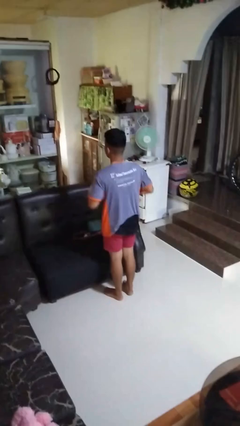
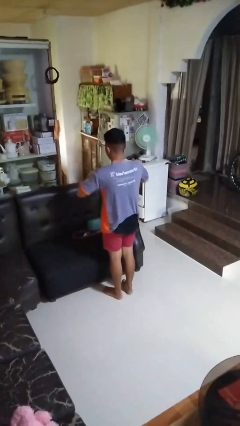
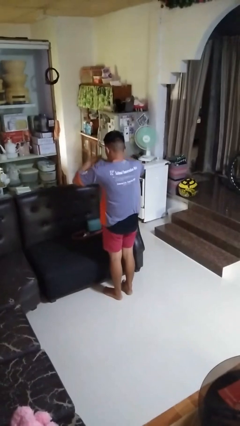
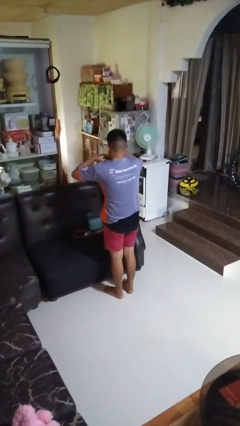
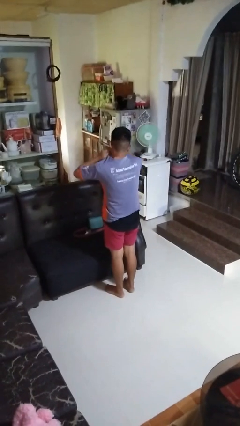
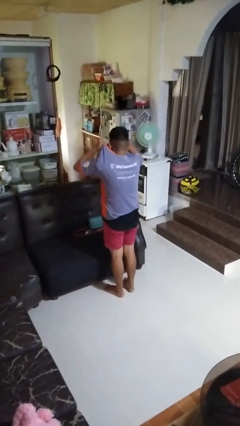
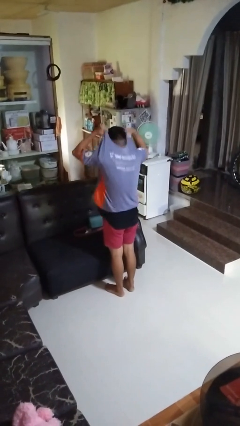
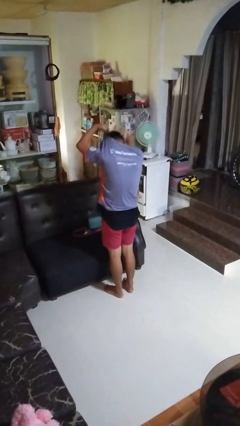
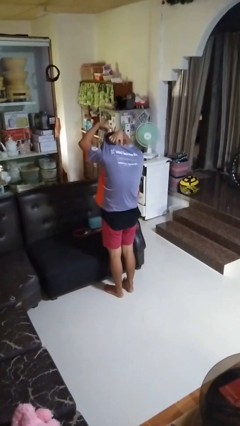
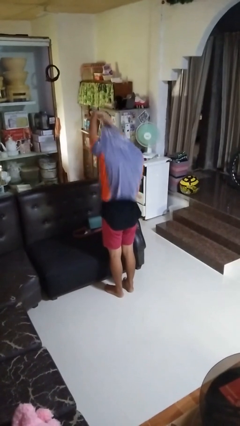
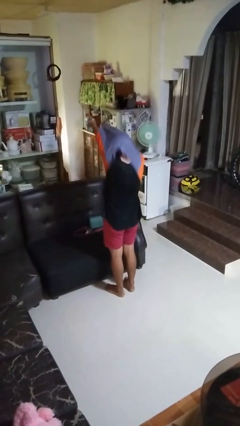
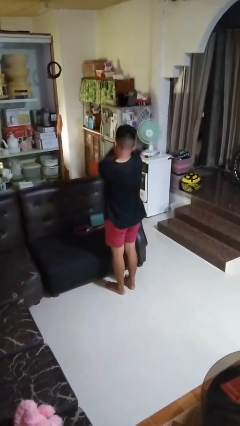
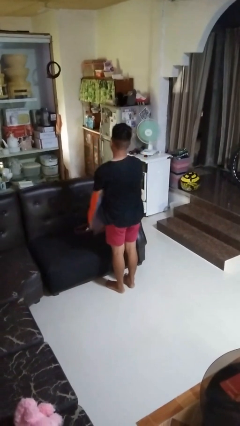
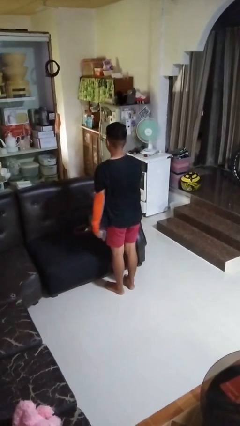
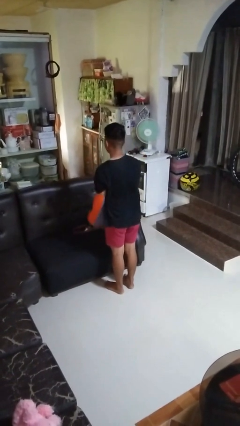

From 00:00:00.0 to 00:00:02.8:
person takes off shirt

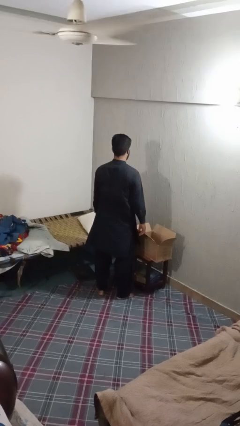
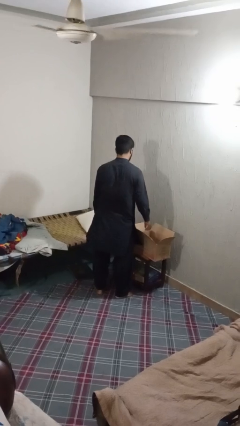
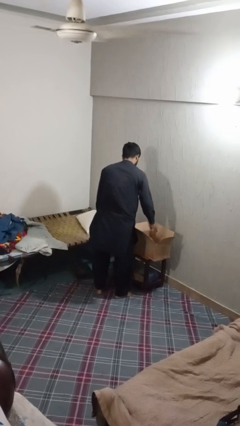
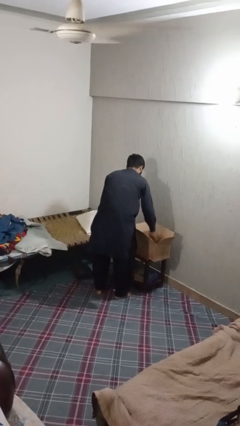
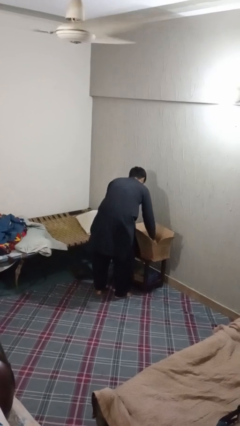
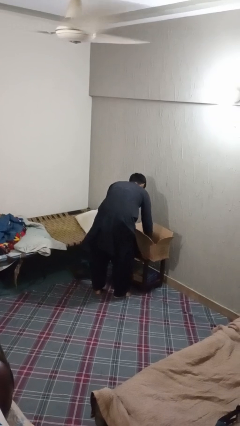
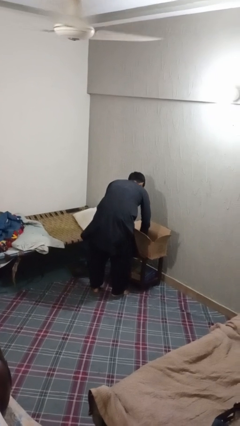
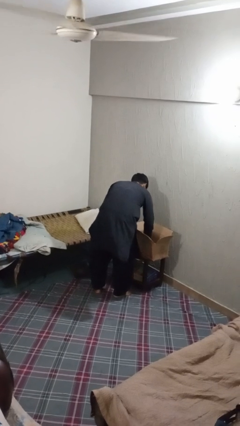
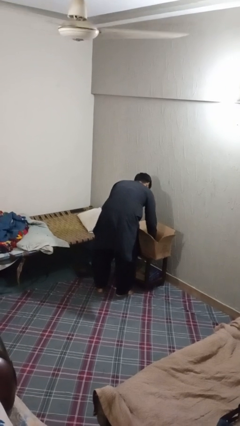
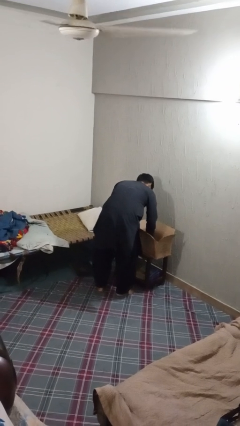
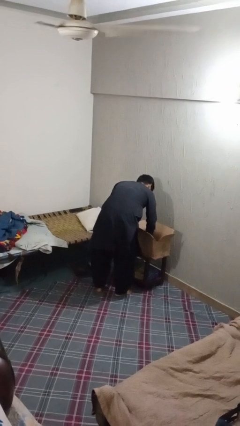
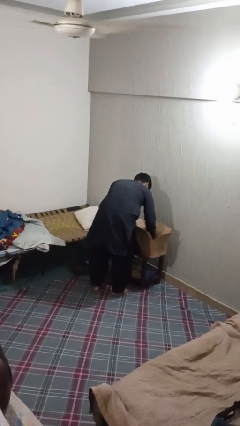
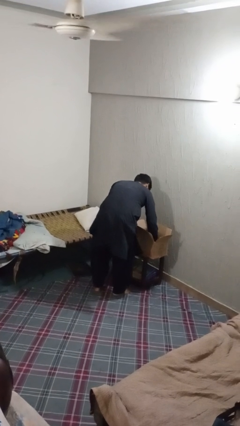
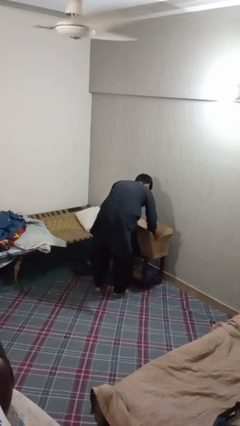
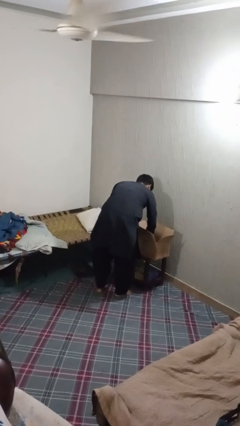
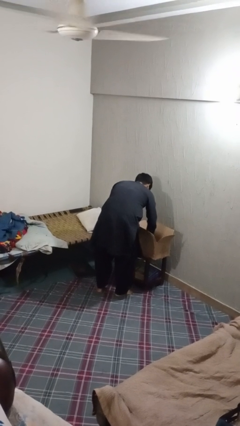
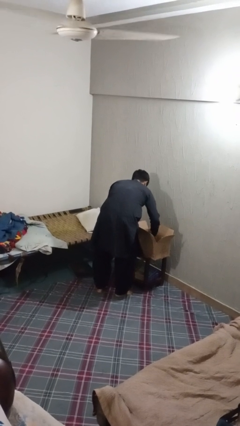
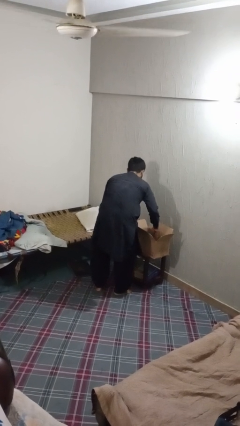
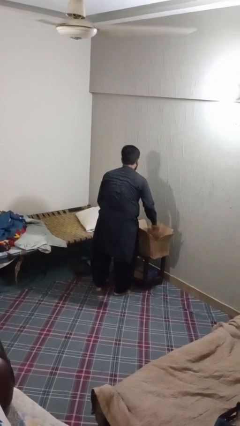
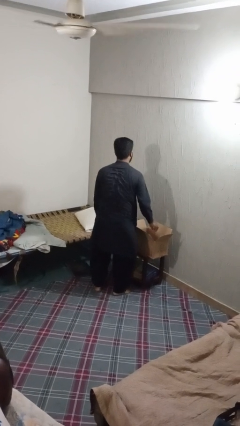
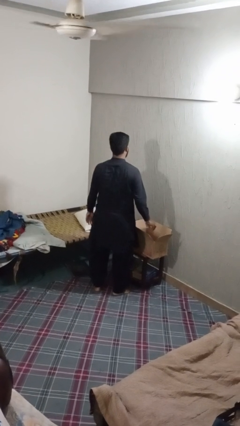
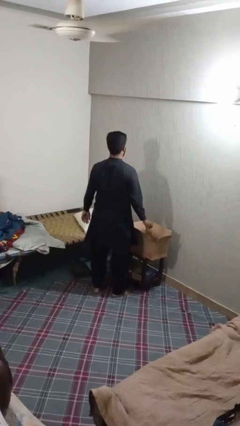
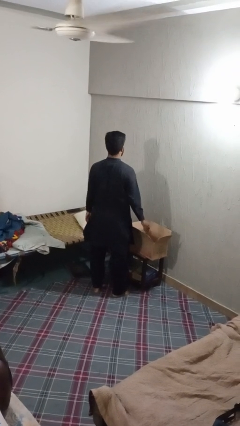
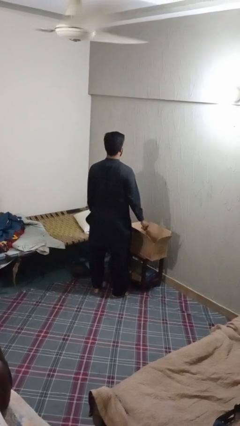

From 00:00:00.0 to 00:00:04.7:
person searches in box

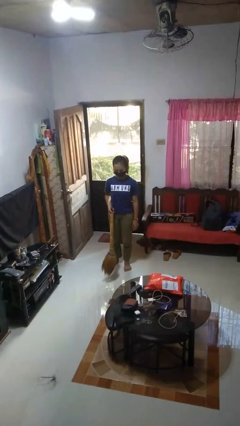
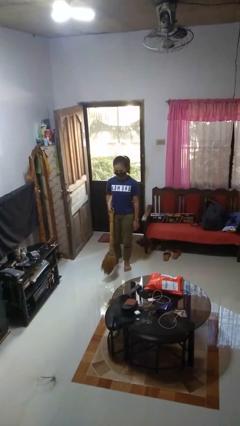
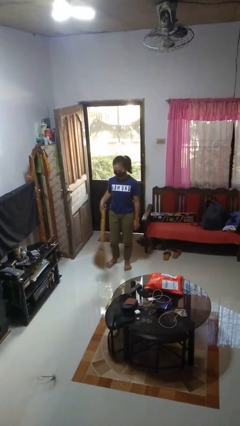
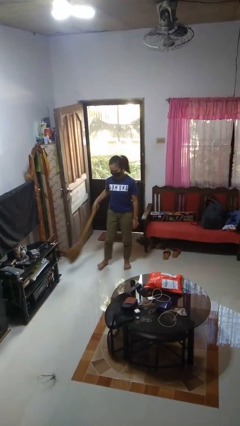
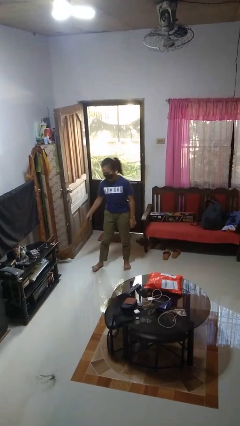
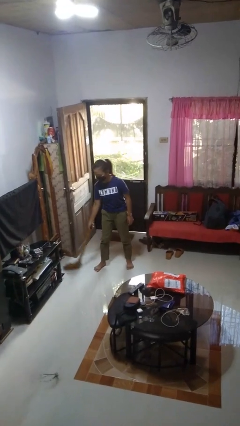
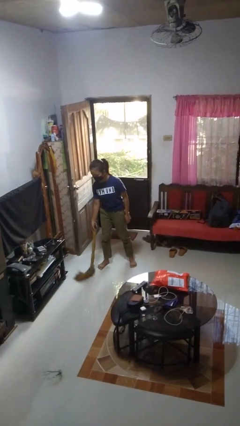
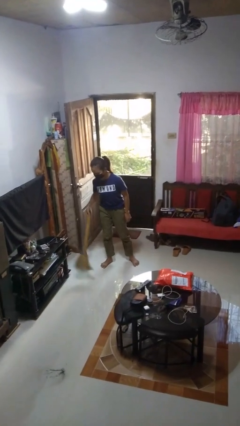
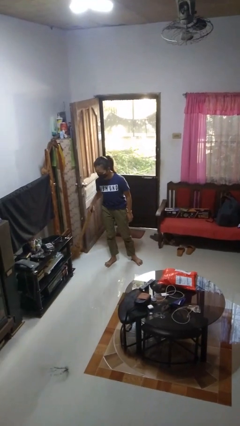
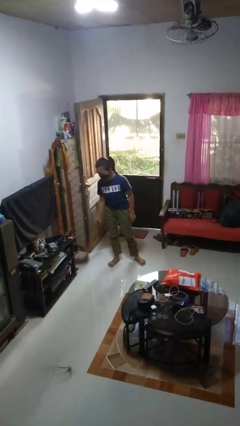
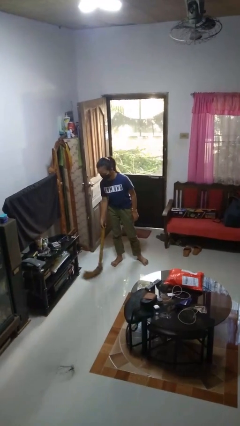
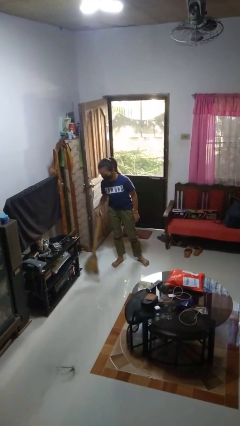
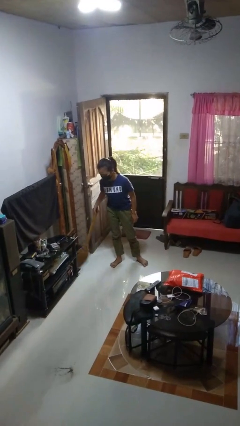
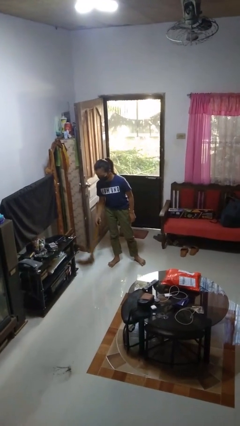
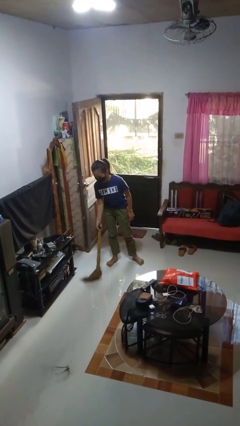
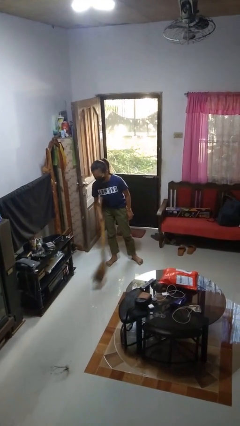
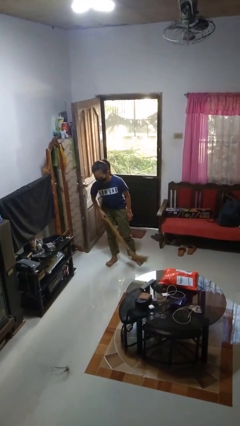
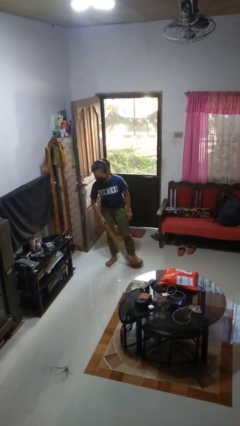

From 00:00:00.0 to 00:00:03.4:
person sweeps floor

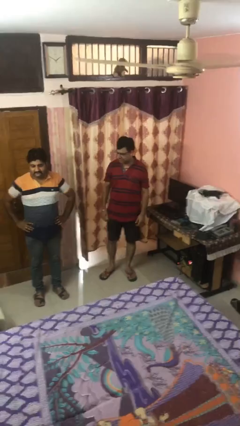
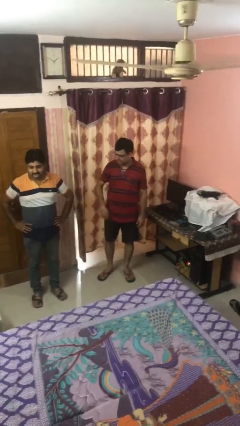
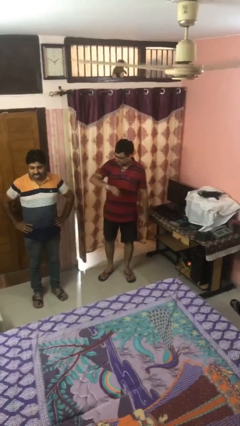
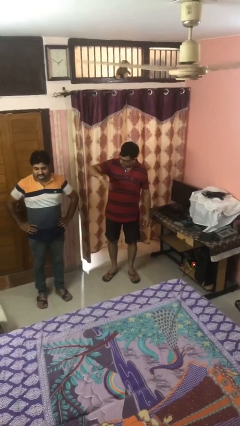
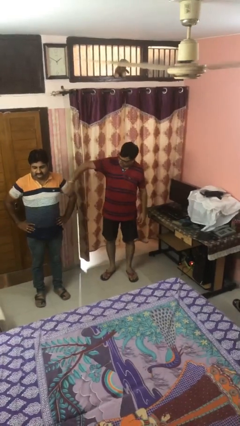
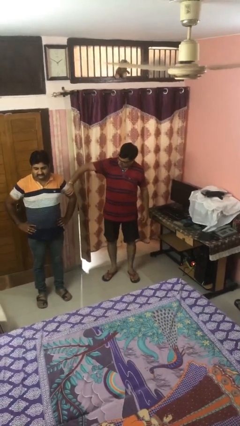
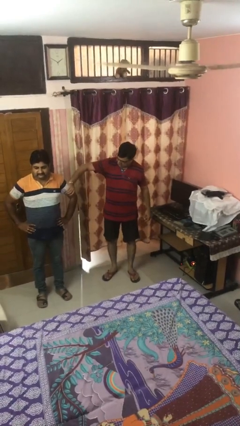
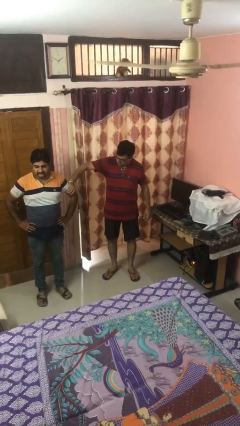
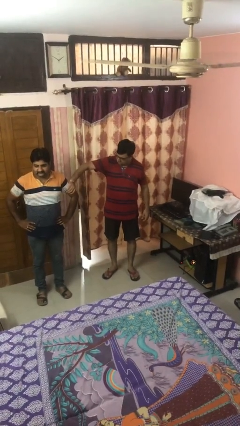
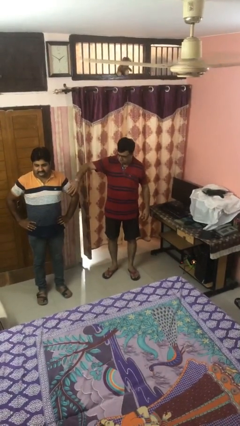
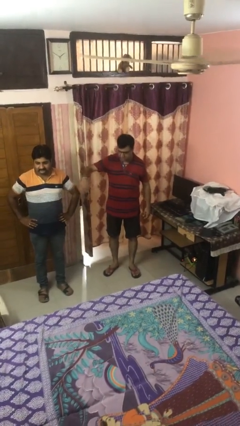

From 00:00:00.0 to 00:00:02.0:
person grabs person by bicep

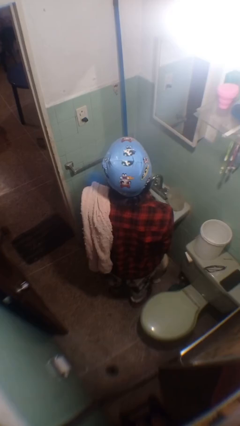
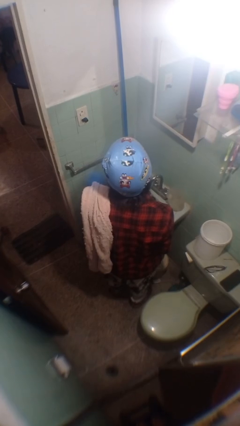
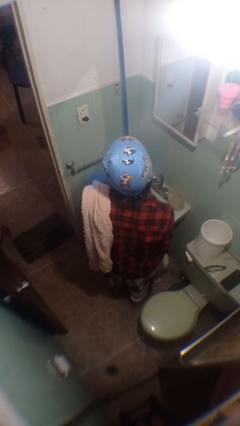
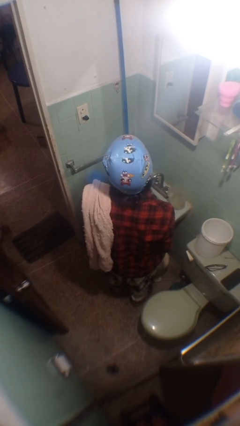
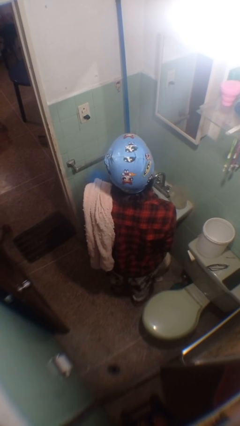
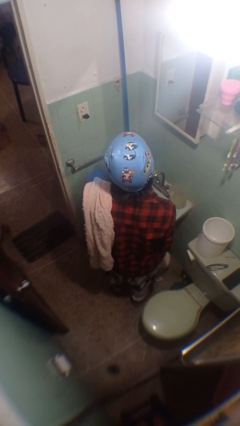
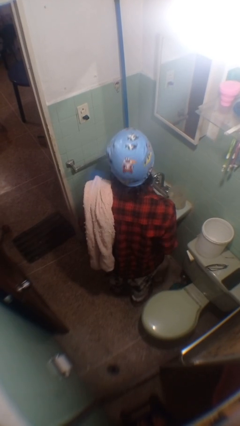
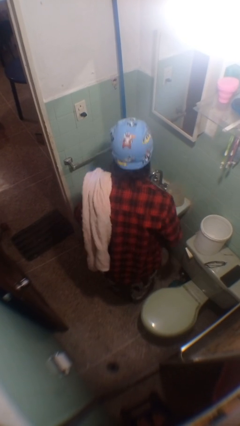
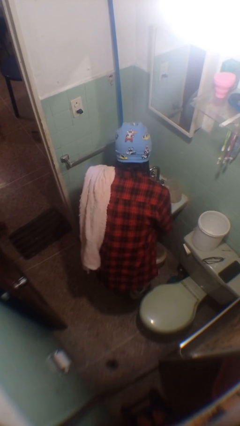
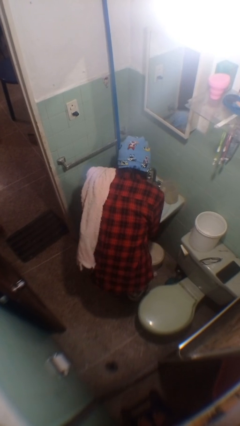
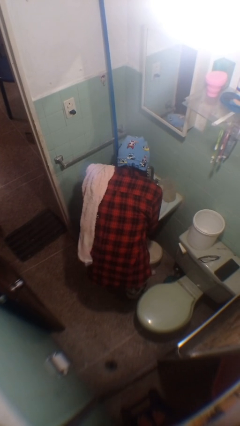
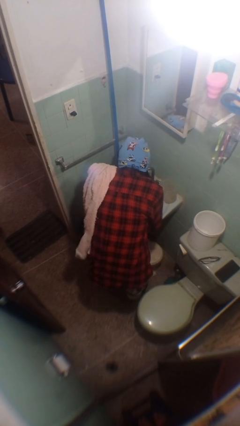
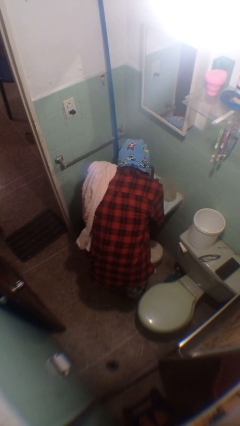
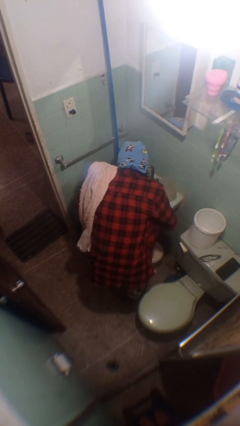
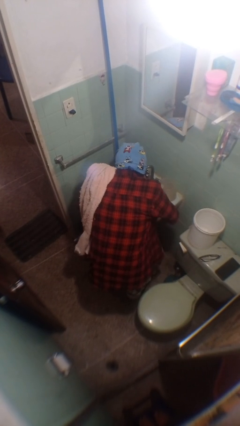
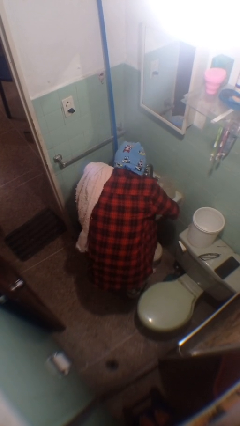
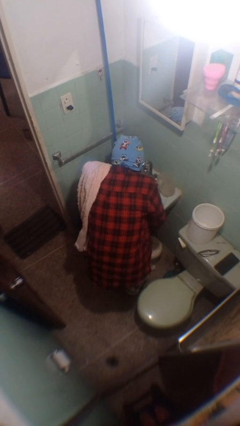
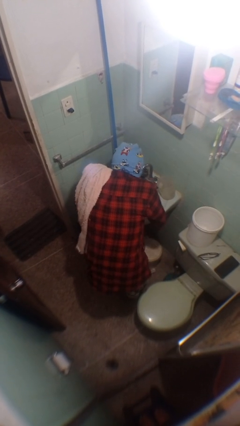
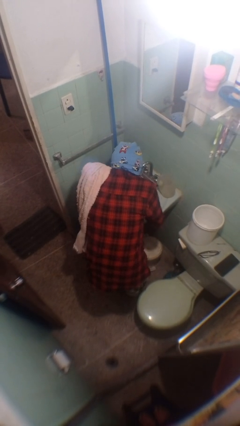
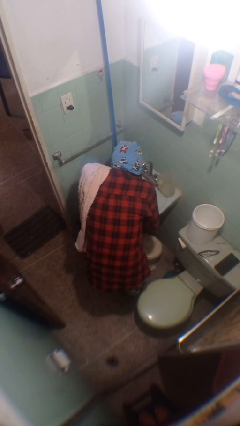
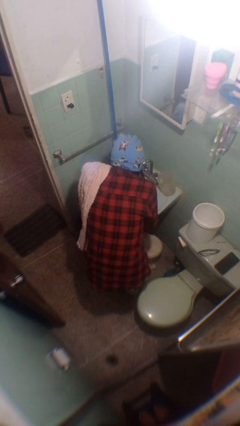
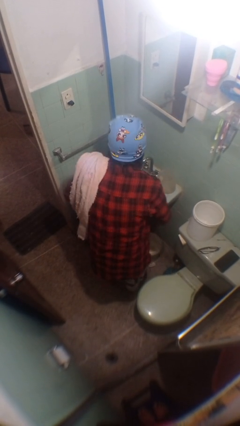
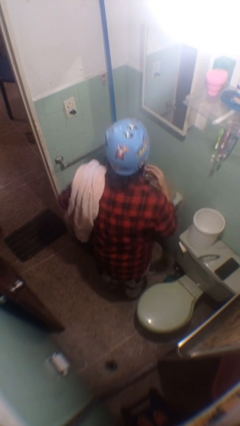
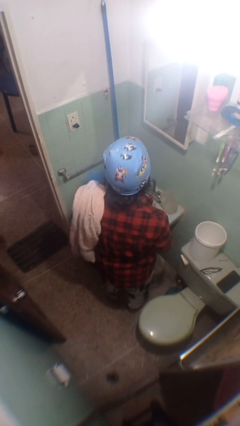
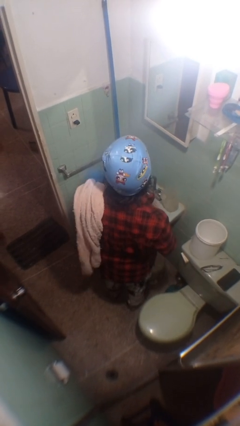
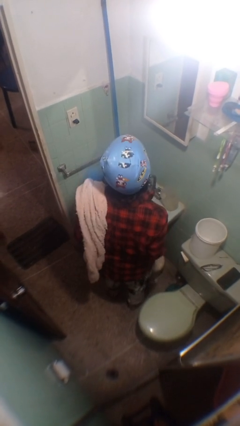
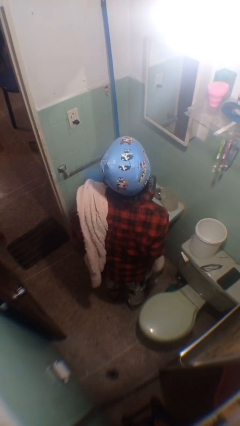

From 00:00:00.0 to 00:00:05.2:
person washes face
